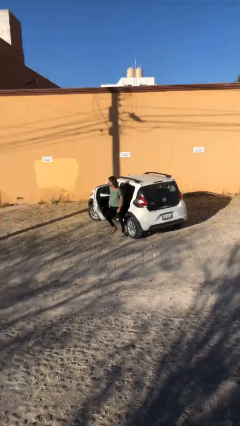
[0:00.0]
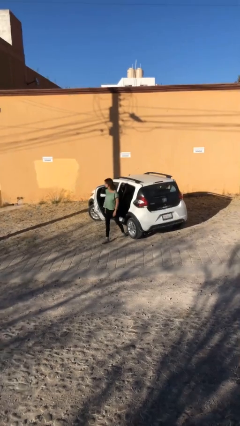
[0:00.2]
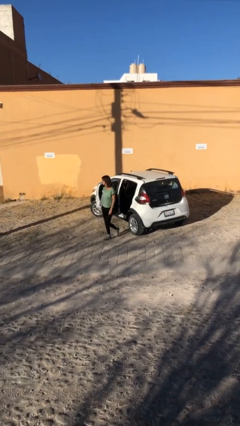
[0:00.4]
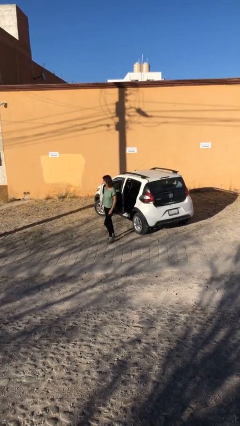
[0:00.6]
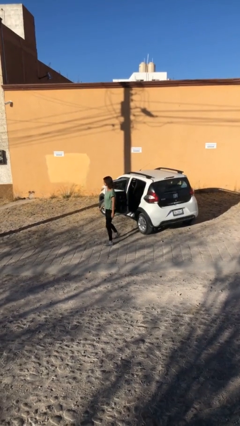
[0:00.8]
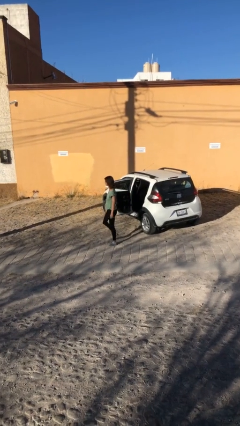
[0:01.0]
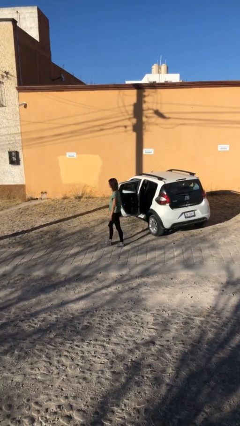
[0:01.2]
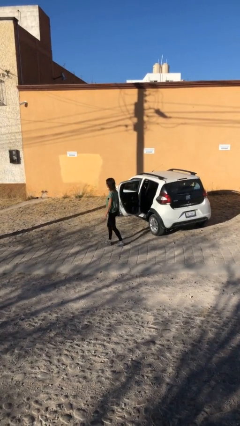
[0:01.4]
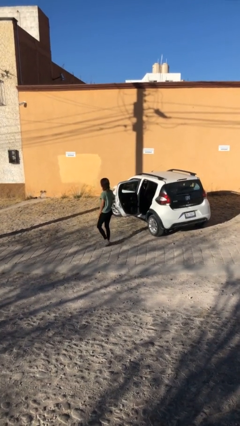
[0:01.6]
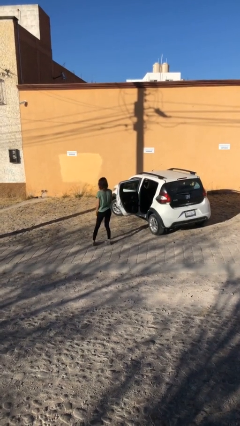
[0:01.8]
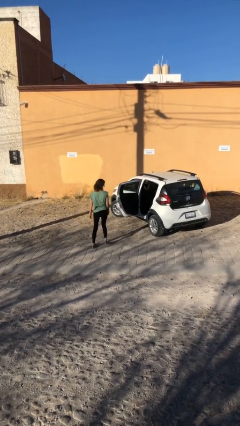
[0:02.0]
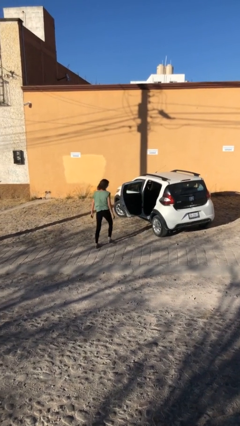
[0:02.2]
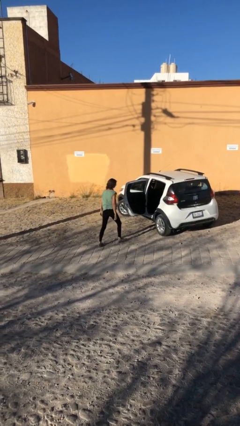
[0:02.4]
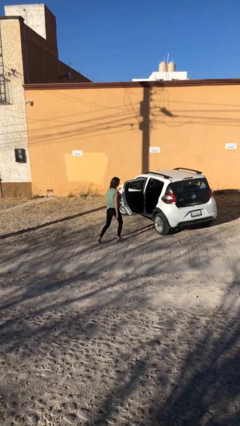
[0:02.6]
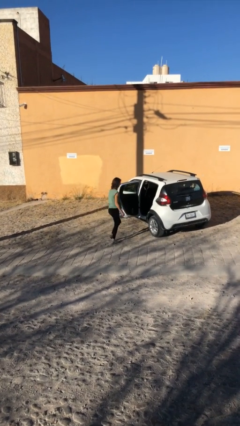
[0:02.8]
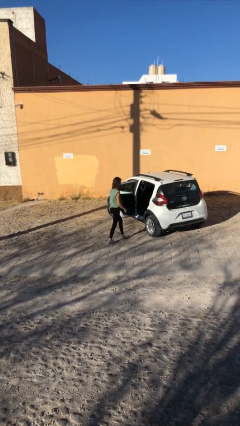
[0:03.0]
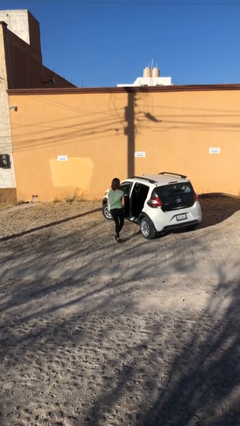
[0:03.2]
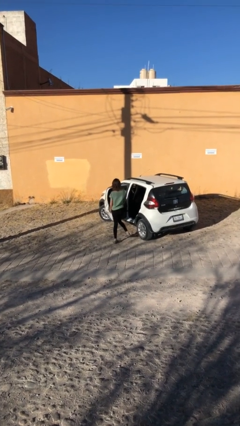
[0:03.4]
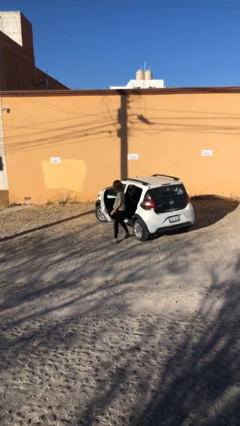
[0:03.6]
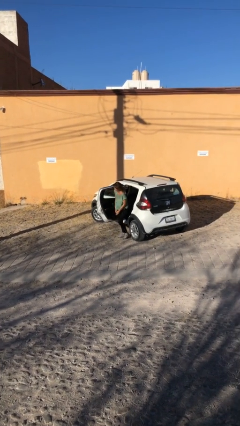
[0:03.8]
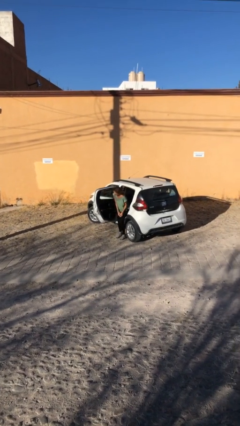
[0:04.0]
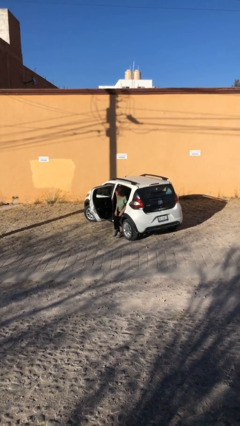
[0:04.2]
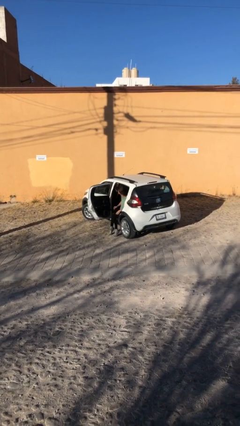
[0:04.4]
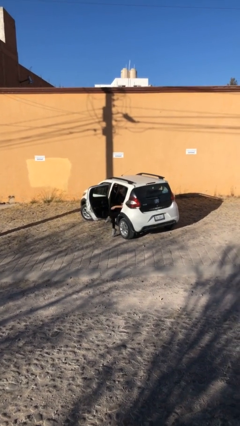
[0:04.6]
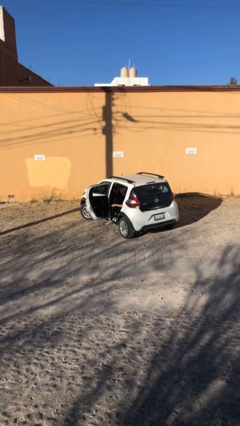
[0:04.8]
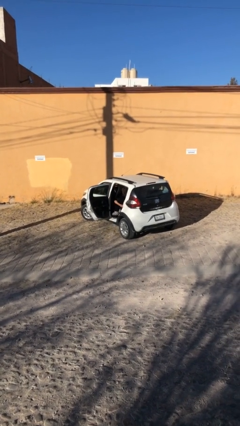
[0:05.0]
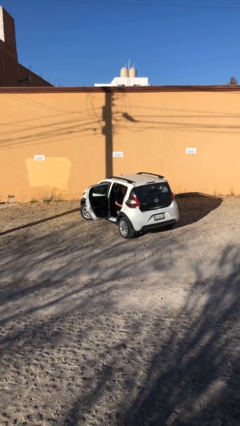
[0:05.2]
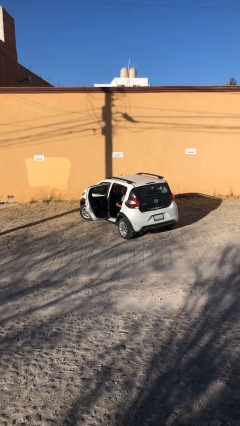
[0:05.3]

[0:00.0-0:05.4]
person enters car

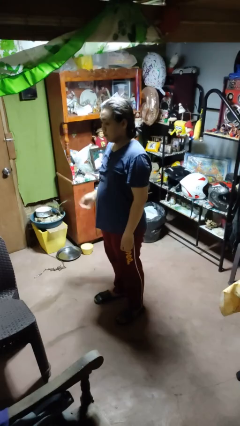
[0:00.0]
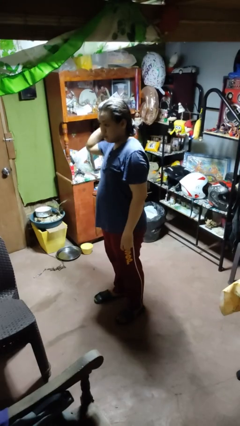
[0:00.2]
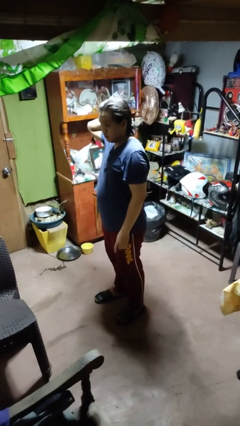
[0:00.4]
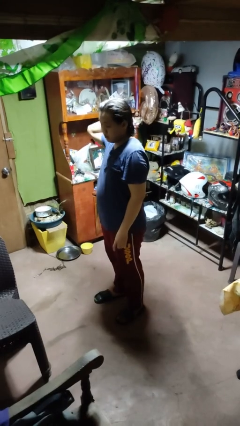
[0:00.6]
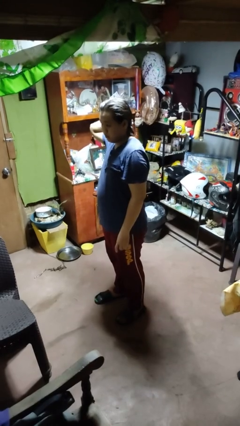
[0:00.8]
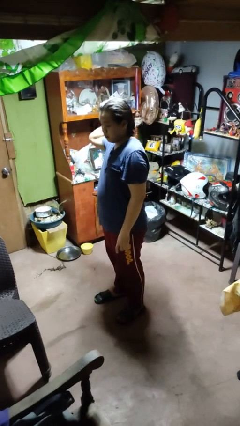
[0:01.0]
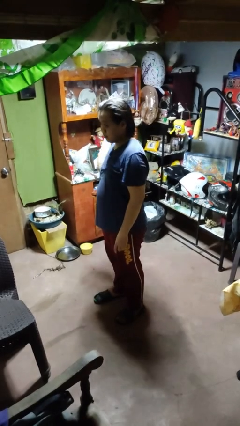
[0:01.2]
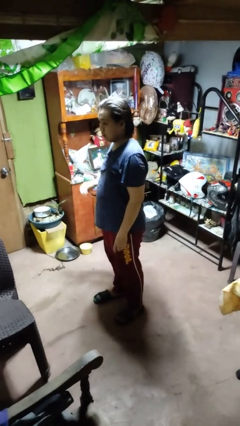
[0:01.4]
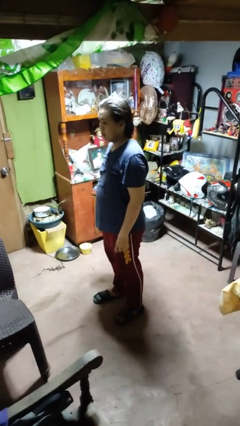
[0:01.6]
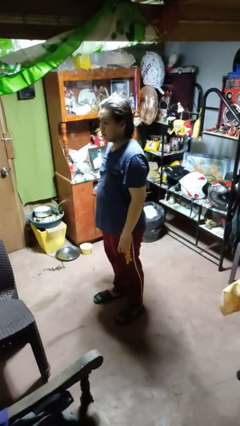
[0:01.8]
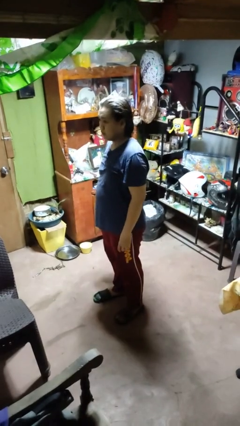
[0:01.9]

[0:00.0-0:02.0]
person takes off hairtie

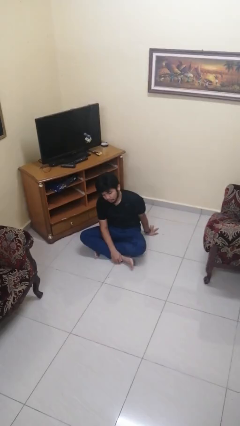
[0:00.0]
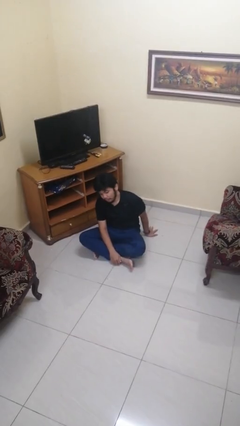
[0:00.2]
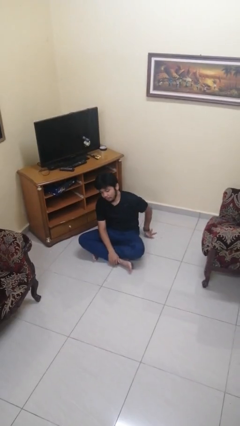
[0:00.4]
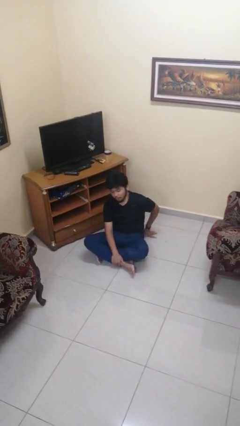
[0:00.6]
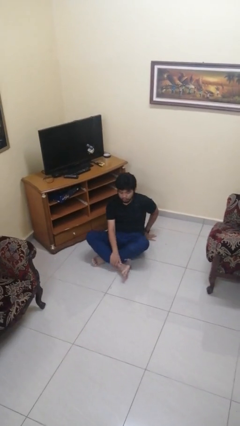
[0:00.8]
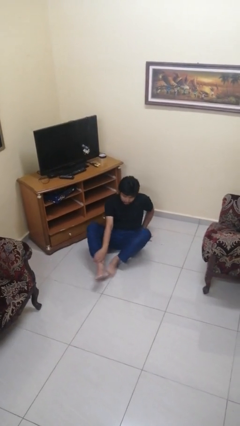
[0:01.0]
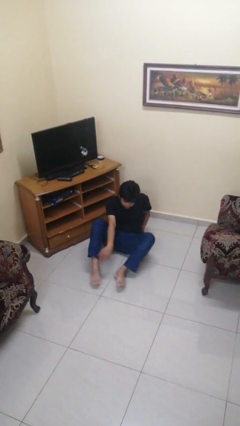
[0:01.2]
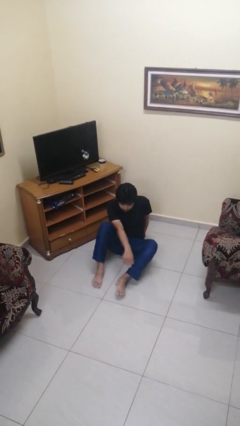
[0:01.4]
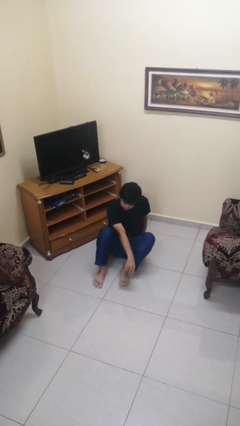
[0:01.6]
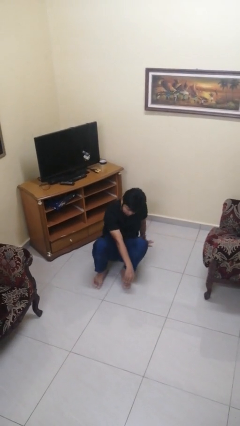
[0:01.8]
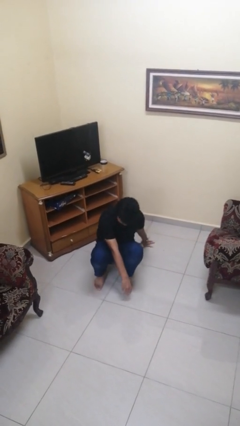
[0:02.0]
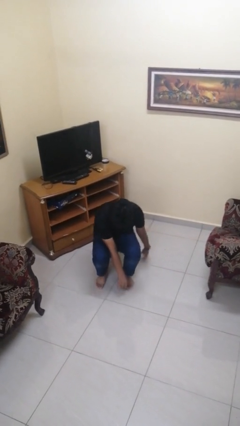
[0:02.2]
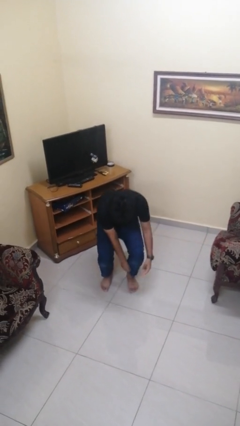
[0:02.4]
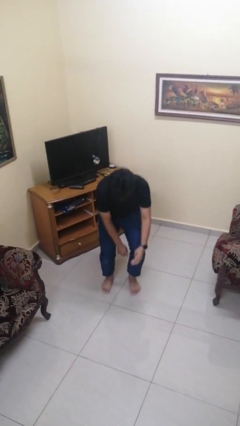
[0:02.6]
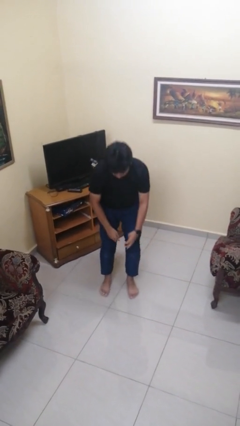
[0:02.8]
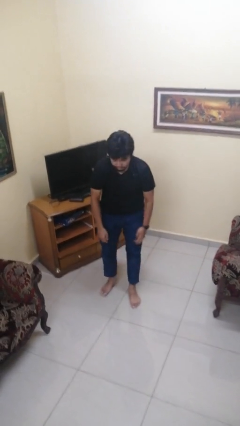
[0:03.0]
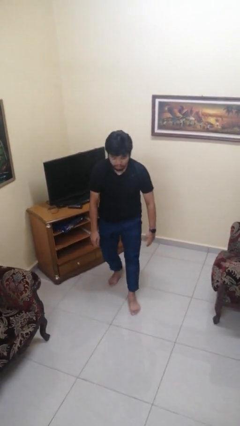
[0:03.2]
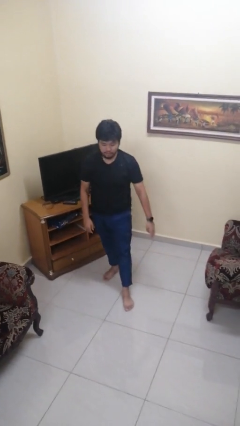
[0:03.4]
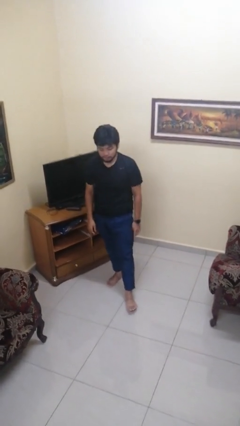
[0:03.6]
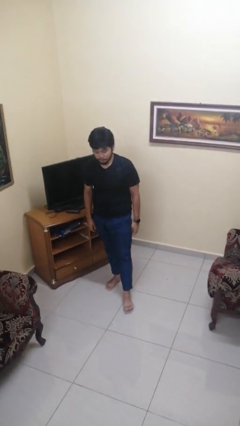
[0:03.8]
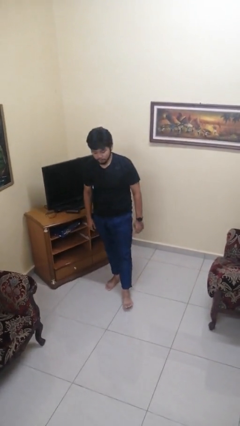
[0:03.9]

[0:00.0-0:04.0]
person stands up from floor

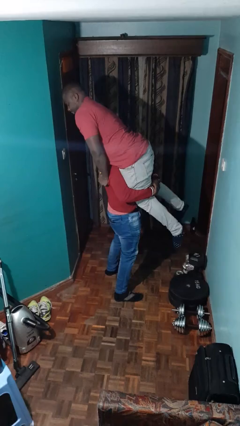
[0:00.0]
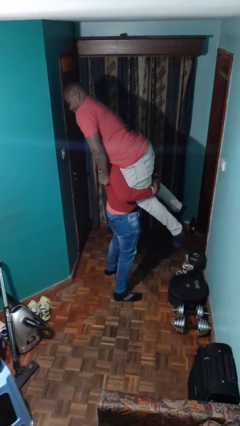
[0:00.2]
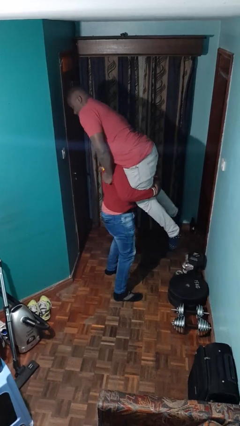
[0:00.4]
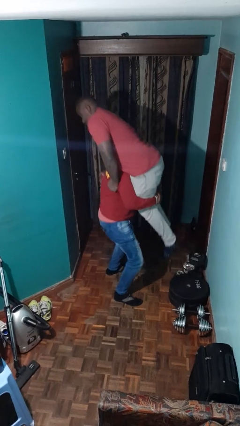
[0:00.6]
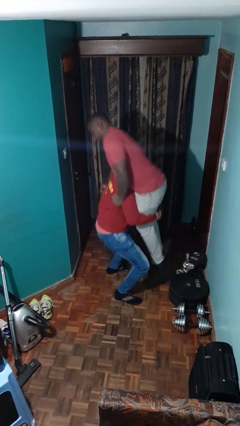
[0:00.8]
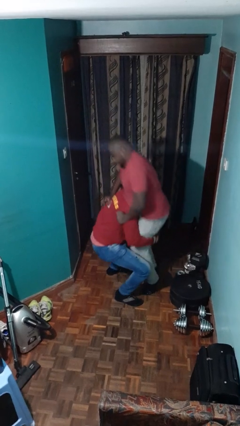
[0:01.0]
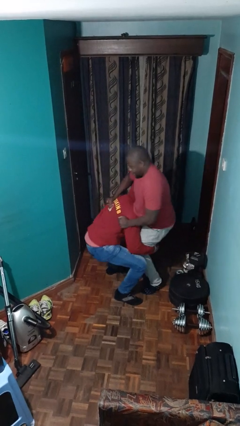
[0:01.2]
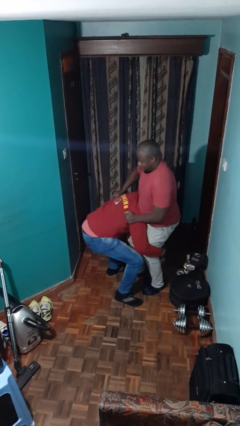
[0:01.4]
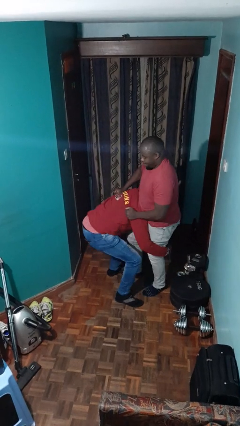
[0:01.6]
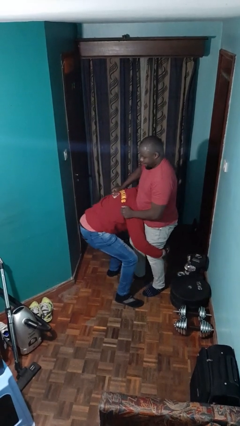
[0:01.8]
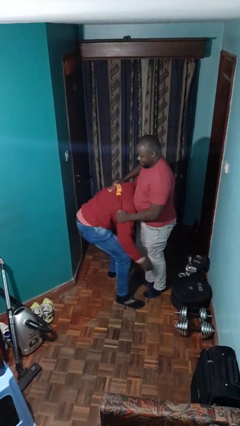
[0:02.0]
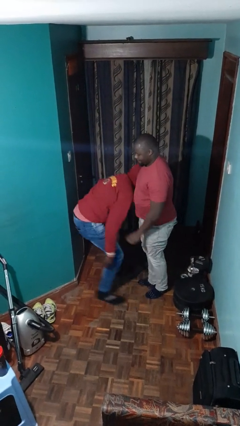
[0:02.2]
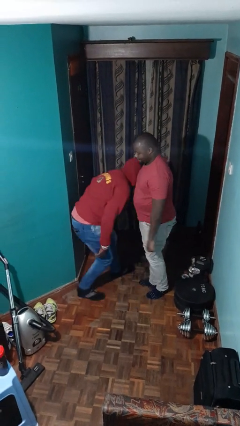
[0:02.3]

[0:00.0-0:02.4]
person puts down person

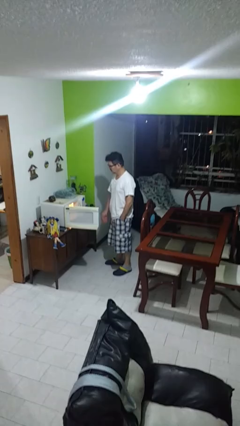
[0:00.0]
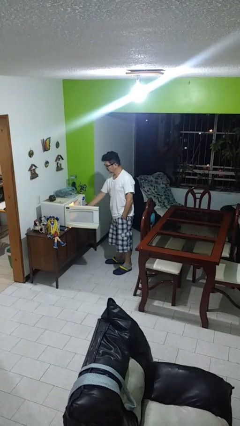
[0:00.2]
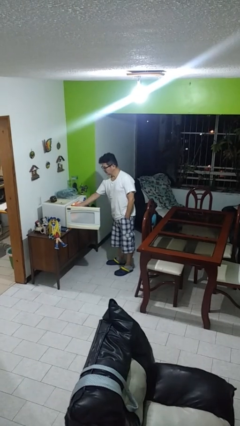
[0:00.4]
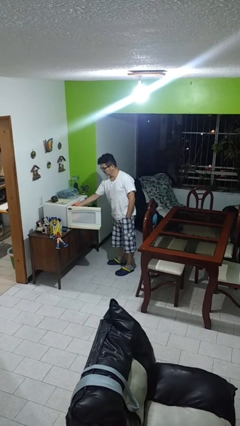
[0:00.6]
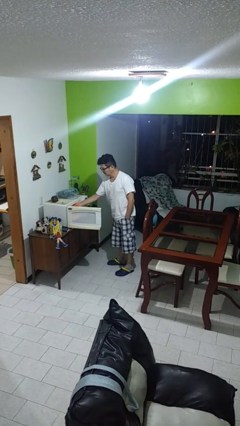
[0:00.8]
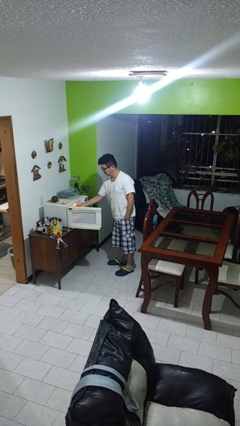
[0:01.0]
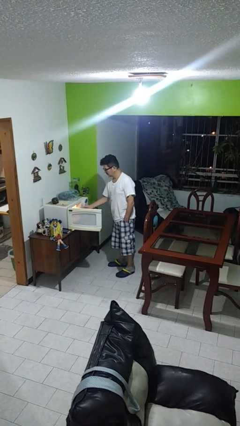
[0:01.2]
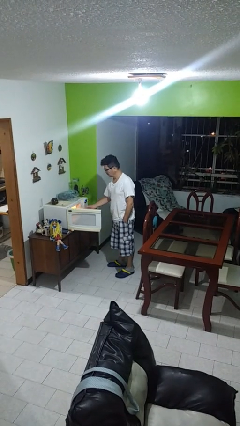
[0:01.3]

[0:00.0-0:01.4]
person takes object from microwave

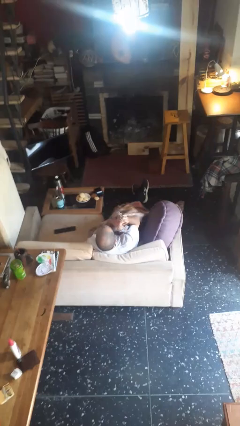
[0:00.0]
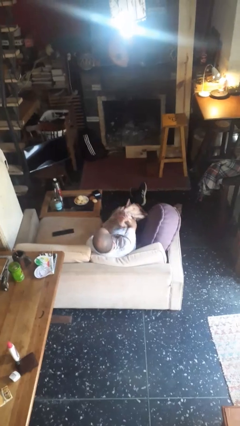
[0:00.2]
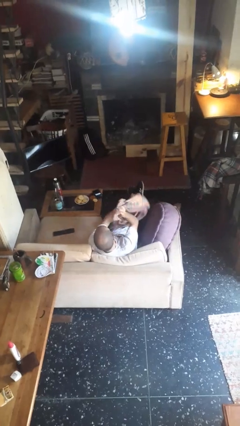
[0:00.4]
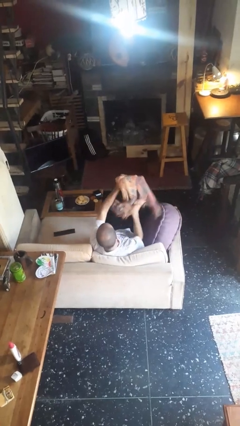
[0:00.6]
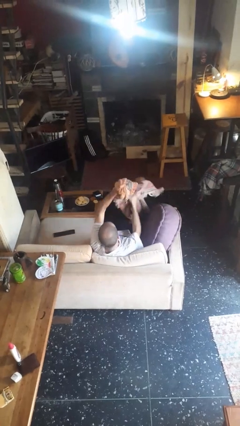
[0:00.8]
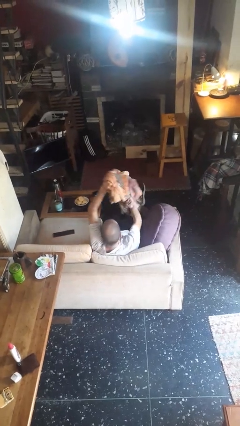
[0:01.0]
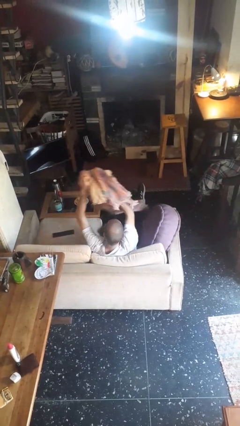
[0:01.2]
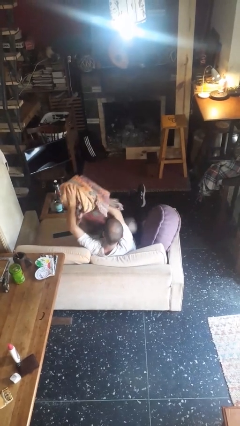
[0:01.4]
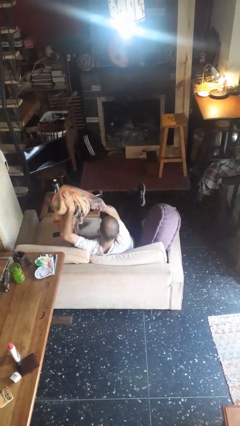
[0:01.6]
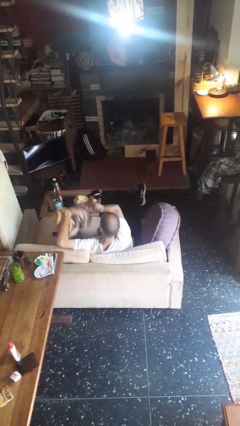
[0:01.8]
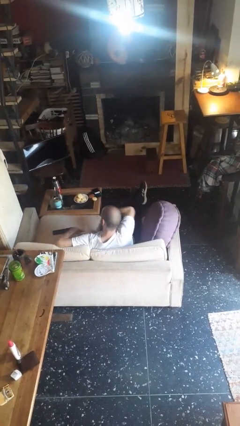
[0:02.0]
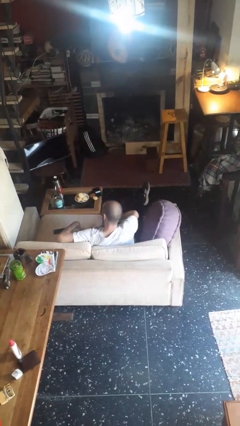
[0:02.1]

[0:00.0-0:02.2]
person uncovers with blanket

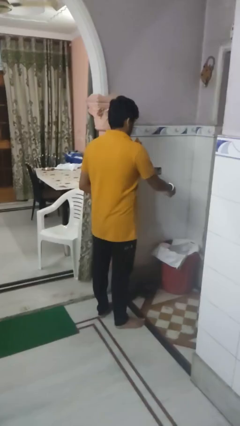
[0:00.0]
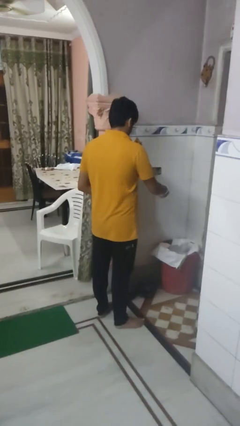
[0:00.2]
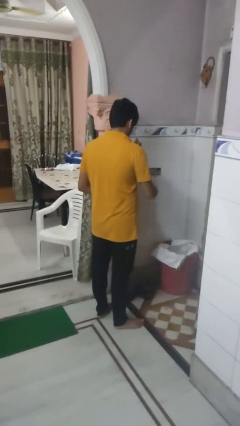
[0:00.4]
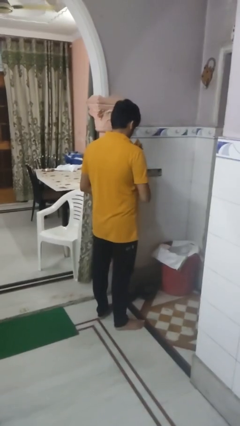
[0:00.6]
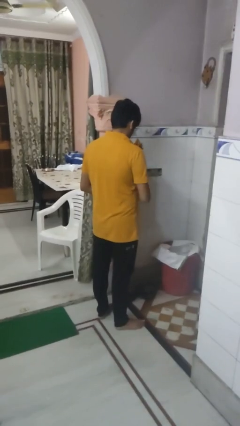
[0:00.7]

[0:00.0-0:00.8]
person discards trash
